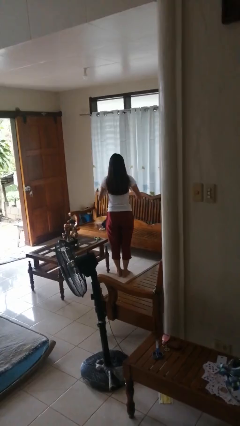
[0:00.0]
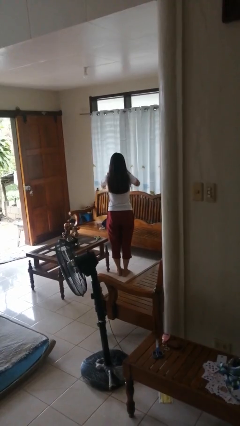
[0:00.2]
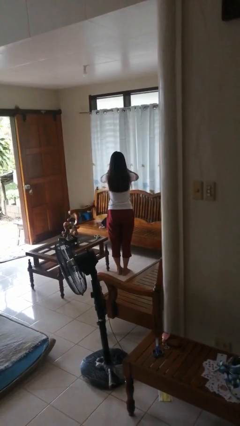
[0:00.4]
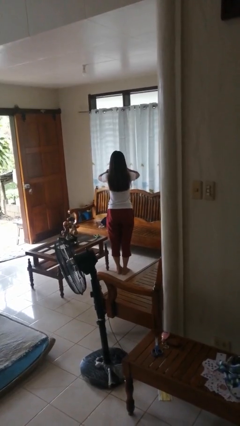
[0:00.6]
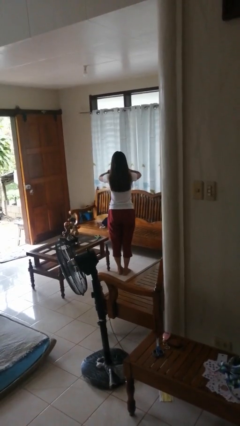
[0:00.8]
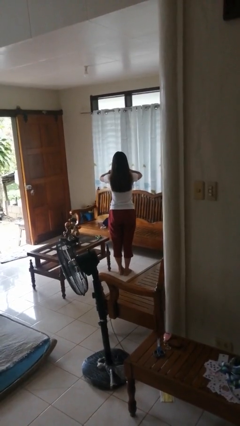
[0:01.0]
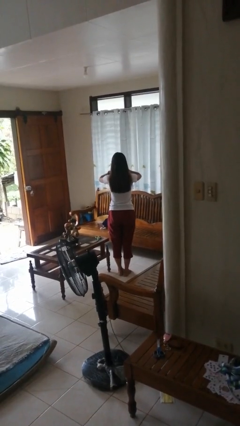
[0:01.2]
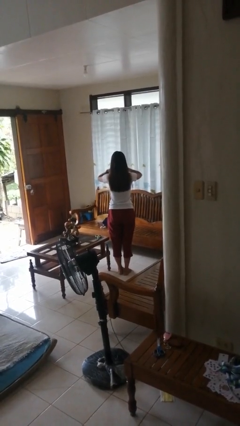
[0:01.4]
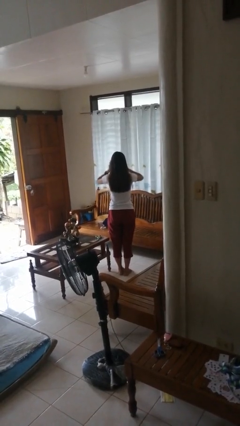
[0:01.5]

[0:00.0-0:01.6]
person covers face with hands

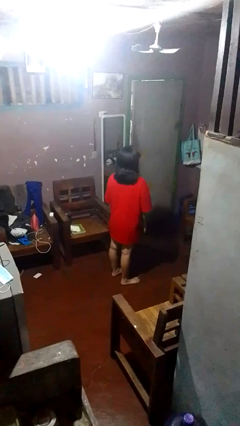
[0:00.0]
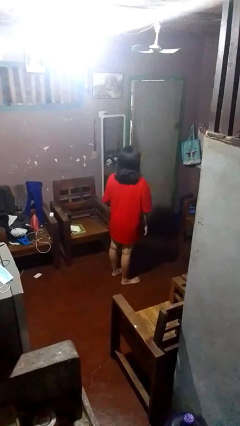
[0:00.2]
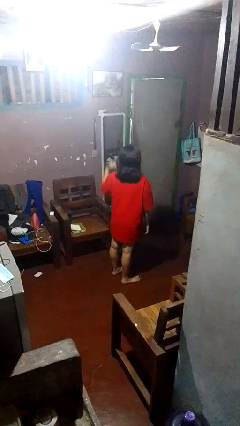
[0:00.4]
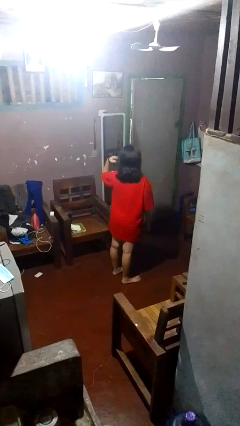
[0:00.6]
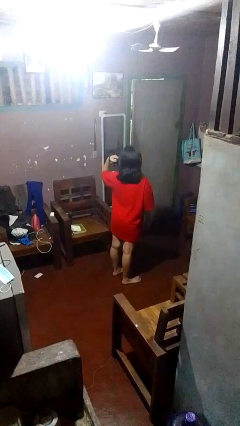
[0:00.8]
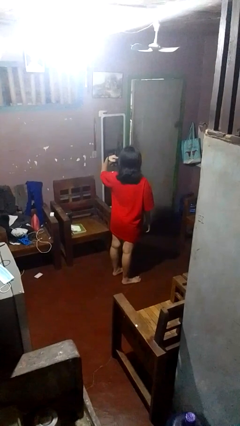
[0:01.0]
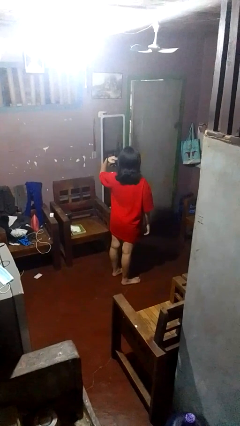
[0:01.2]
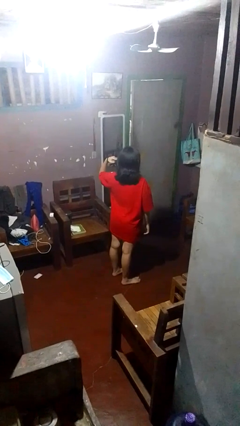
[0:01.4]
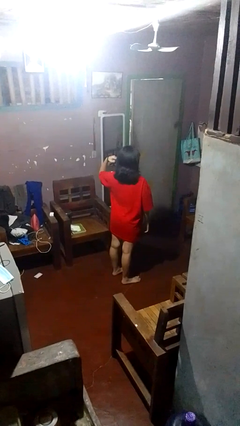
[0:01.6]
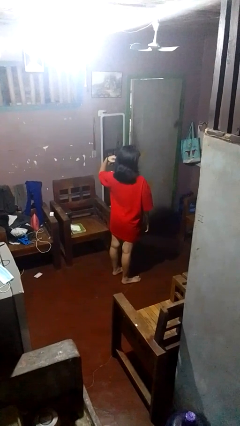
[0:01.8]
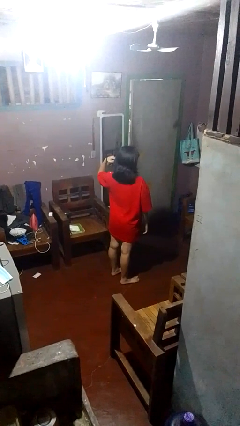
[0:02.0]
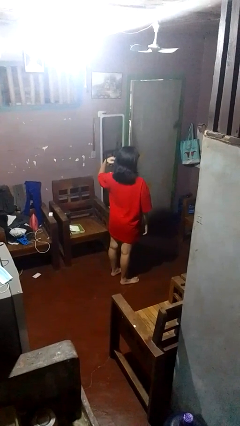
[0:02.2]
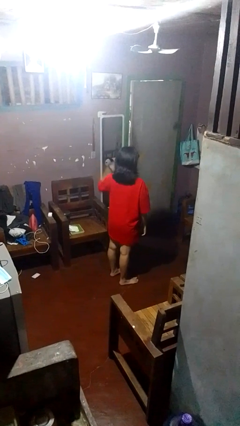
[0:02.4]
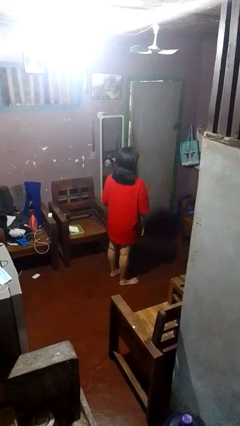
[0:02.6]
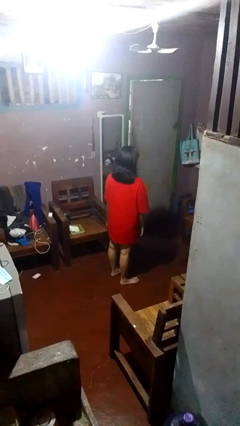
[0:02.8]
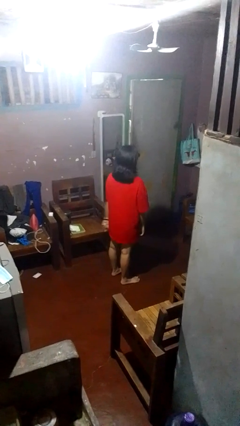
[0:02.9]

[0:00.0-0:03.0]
person gestures listen closely

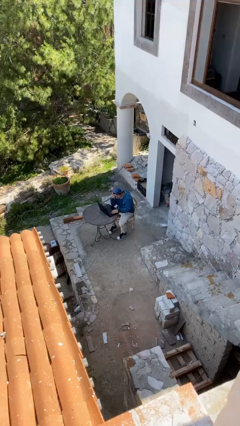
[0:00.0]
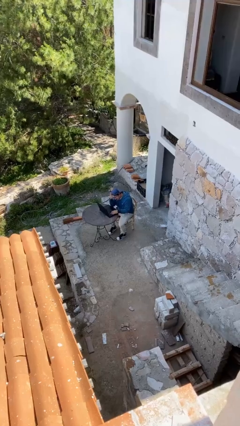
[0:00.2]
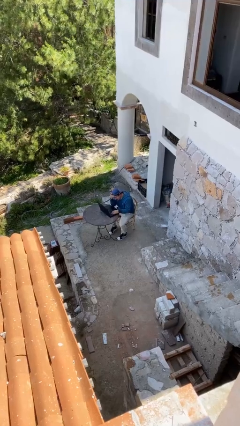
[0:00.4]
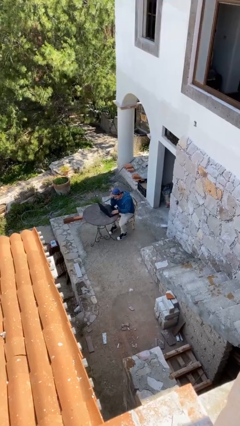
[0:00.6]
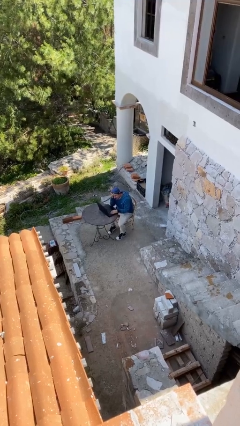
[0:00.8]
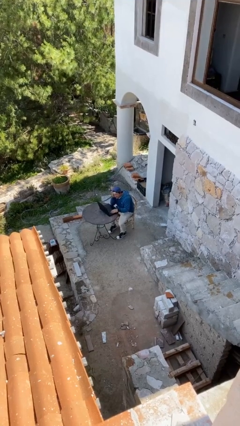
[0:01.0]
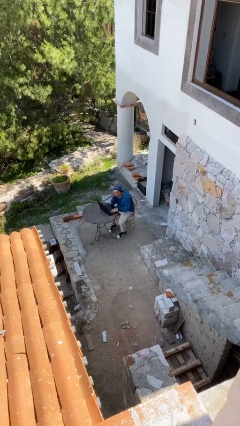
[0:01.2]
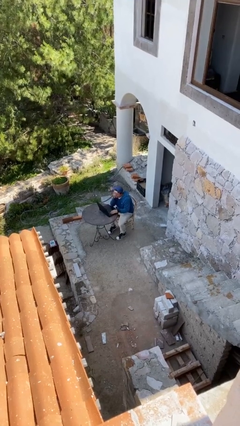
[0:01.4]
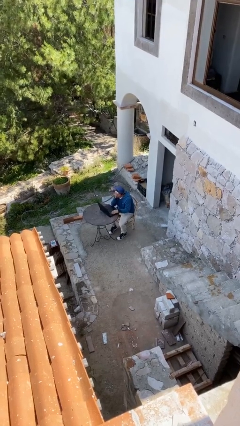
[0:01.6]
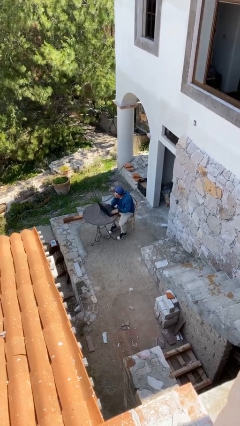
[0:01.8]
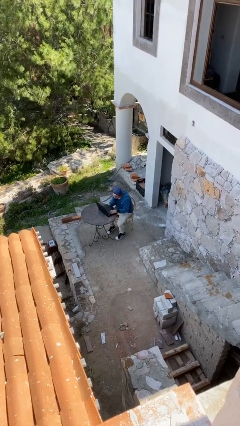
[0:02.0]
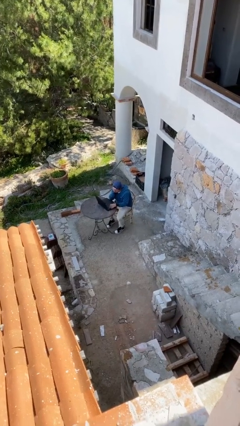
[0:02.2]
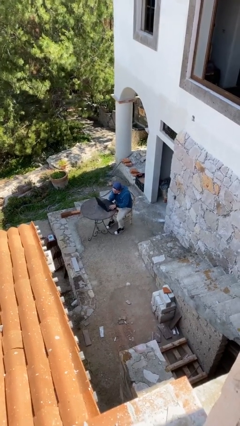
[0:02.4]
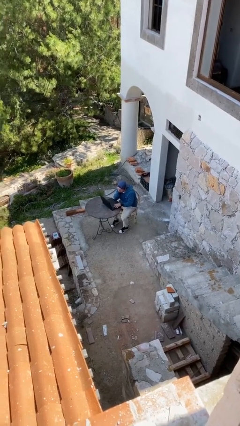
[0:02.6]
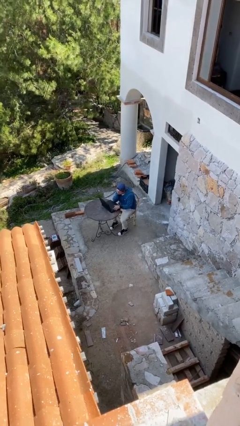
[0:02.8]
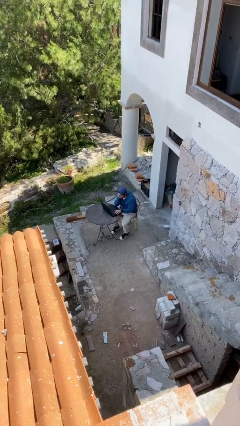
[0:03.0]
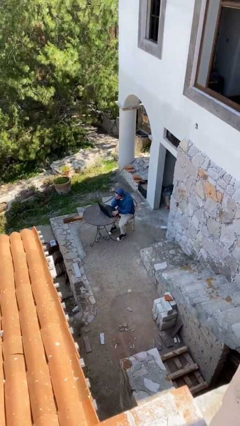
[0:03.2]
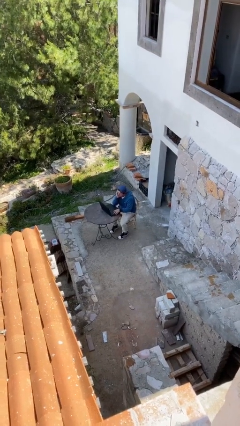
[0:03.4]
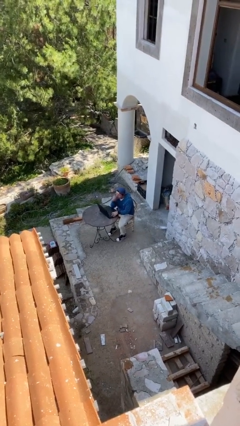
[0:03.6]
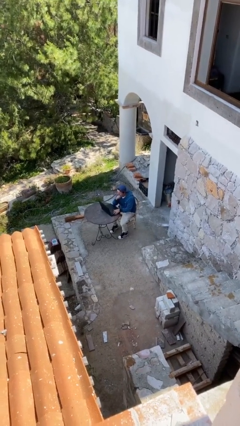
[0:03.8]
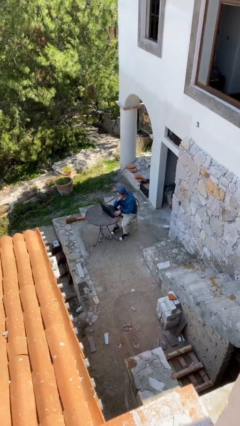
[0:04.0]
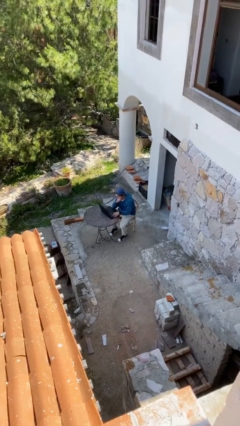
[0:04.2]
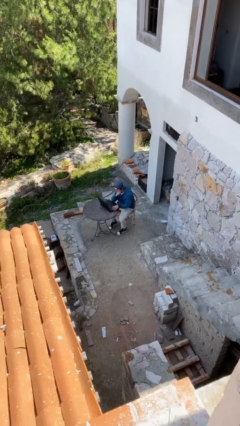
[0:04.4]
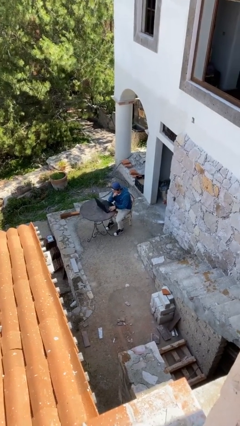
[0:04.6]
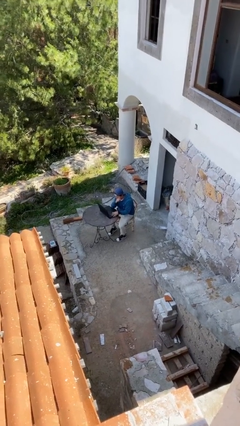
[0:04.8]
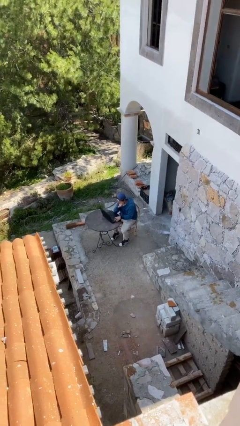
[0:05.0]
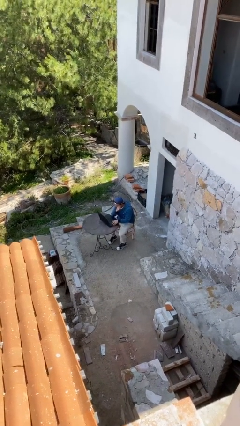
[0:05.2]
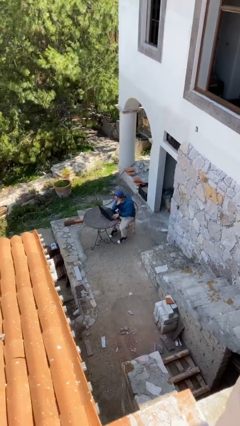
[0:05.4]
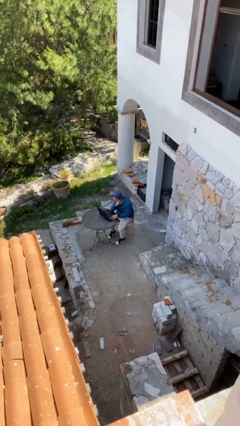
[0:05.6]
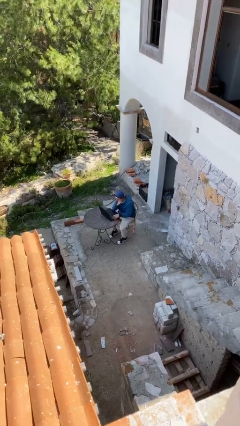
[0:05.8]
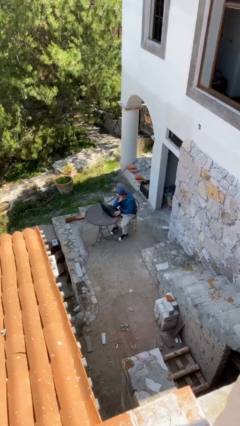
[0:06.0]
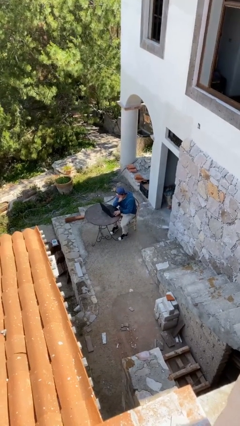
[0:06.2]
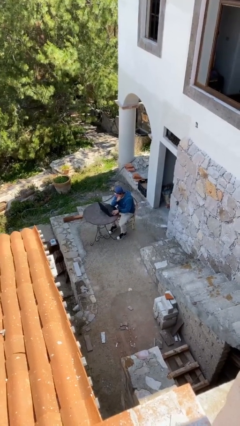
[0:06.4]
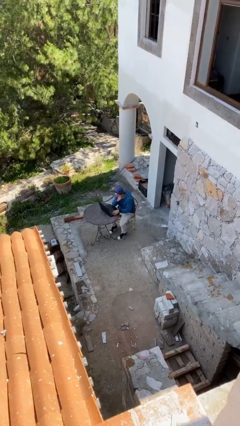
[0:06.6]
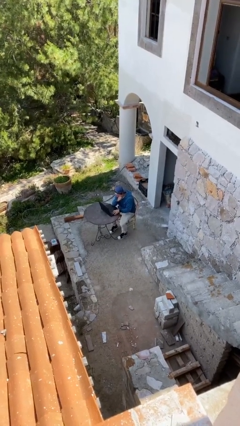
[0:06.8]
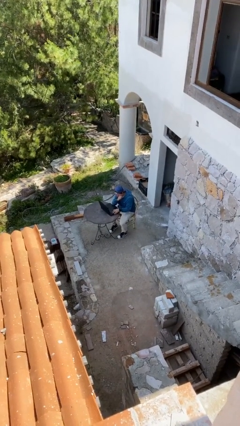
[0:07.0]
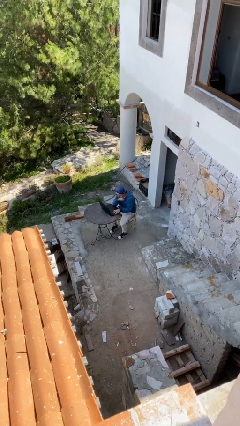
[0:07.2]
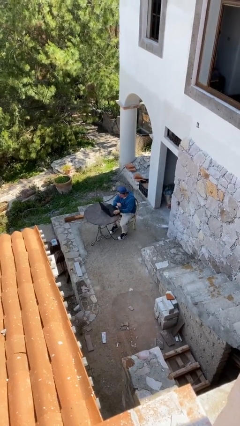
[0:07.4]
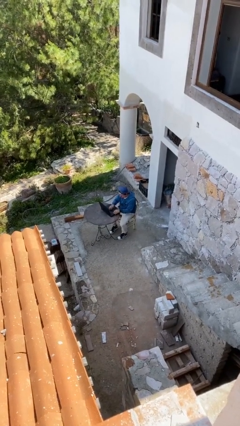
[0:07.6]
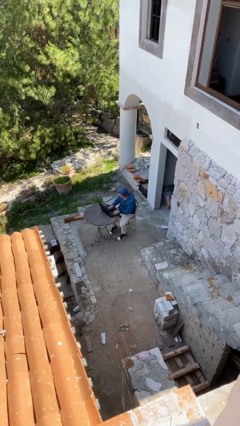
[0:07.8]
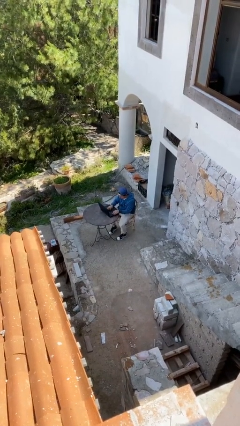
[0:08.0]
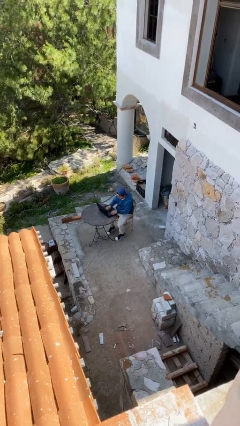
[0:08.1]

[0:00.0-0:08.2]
person interacts with laptop

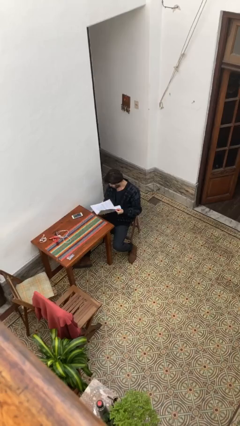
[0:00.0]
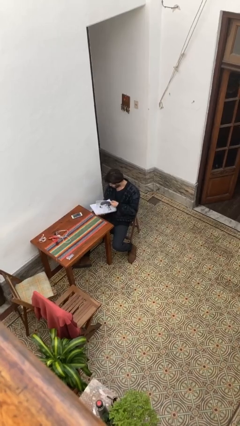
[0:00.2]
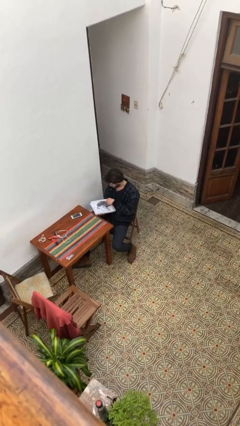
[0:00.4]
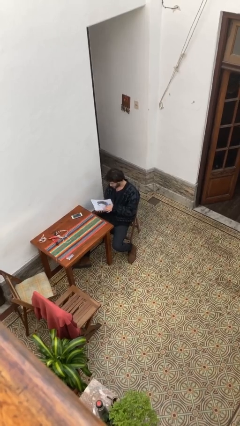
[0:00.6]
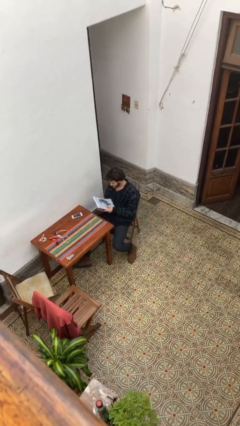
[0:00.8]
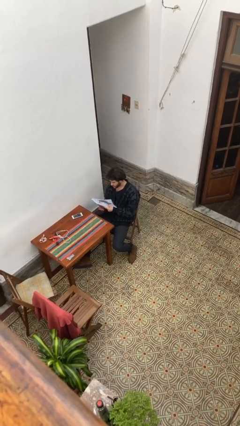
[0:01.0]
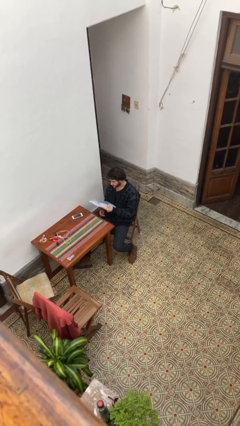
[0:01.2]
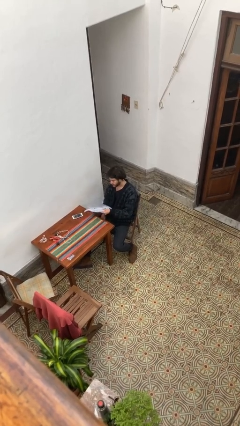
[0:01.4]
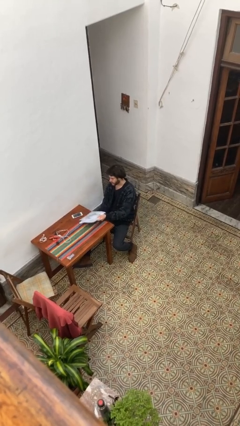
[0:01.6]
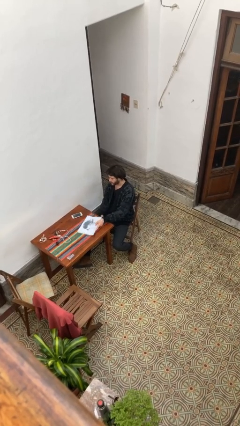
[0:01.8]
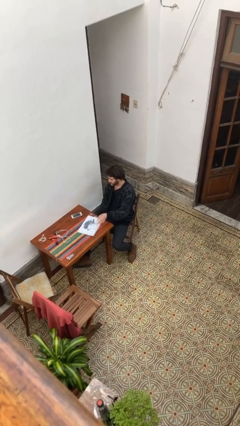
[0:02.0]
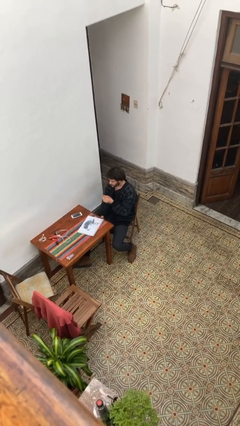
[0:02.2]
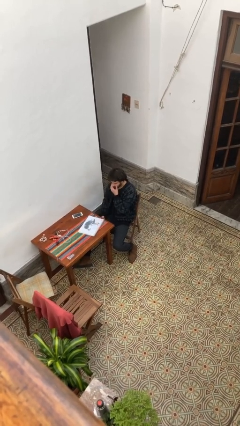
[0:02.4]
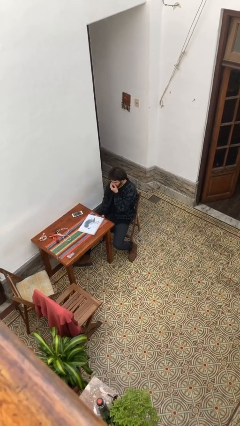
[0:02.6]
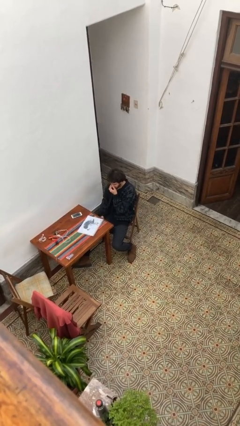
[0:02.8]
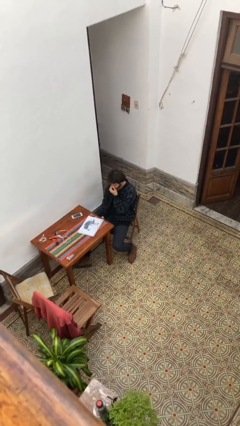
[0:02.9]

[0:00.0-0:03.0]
person puts down object on table

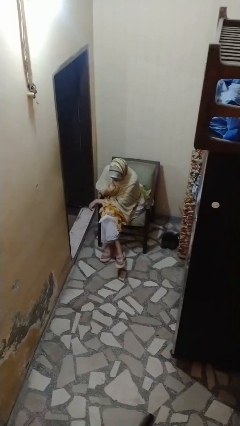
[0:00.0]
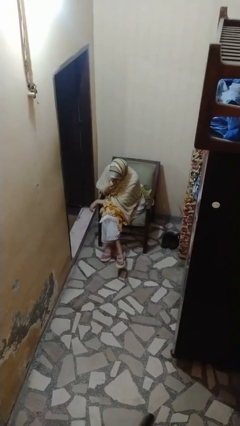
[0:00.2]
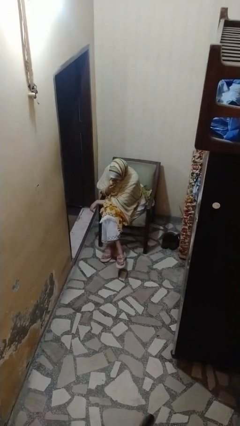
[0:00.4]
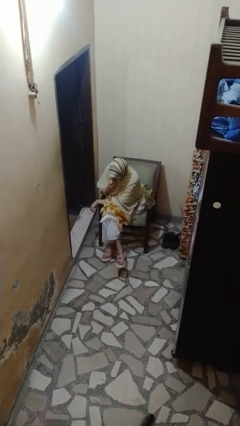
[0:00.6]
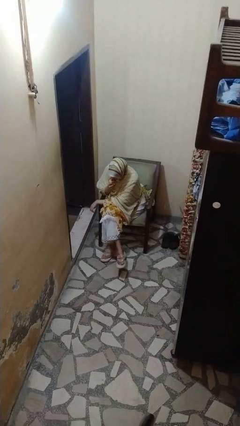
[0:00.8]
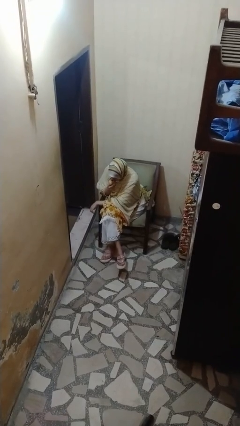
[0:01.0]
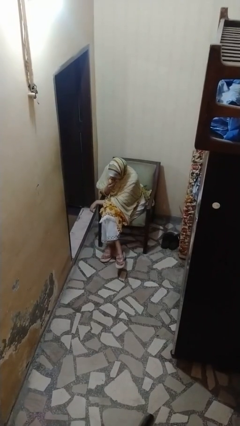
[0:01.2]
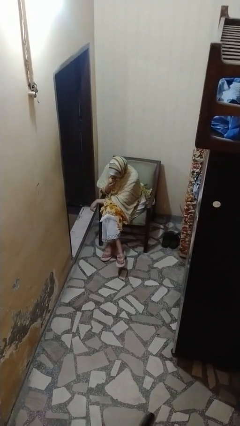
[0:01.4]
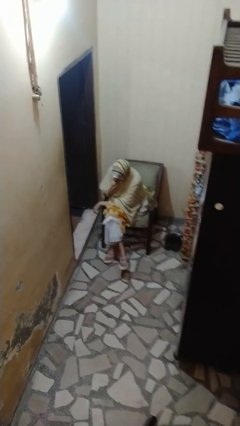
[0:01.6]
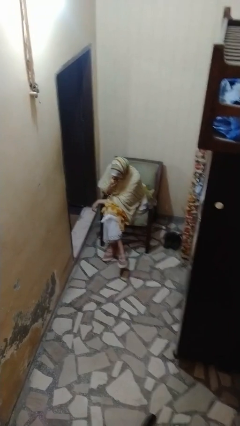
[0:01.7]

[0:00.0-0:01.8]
person eats apple
